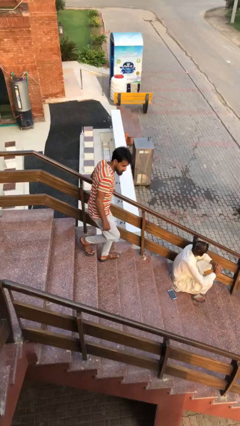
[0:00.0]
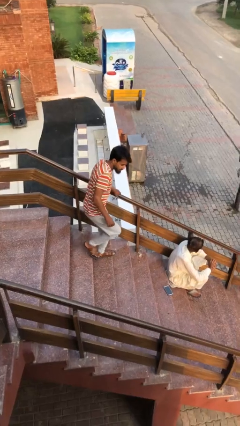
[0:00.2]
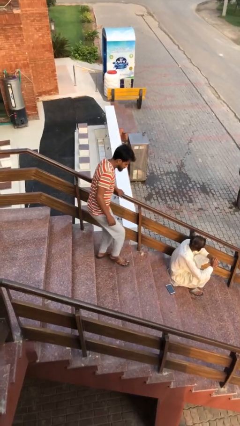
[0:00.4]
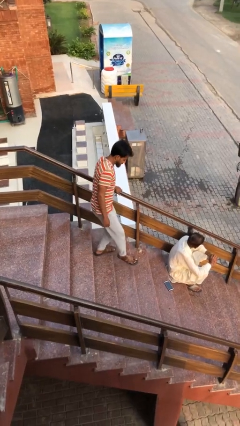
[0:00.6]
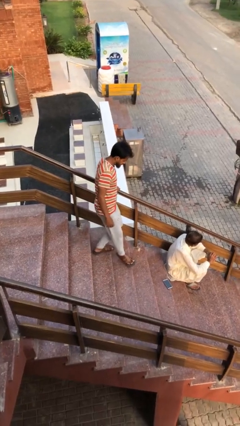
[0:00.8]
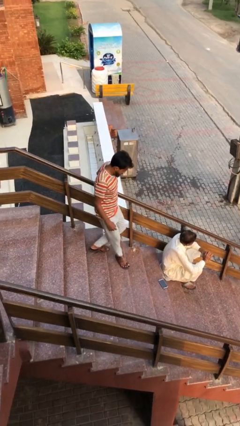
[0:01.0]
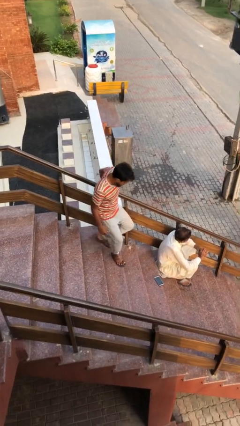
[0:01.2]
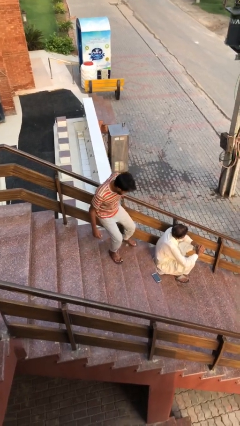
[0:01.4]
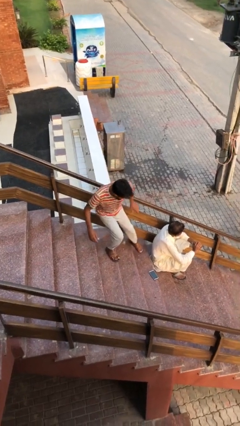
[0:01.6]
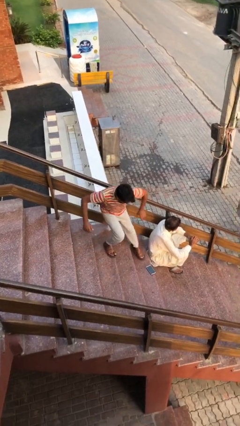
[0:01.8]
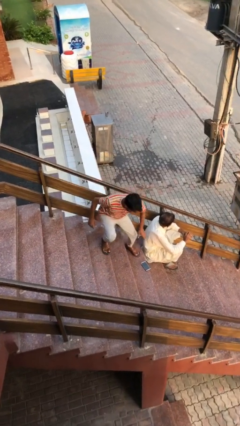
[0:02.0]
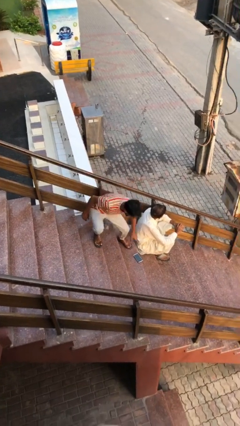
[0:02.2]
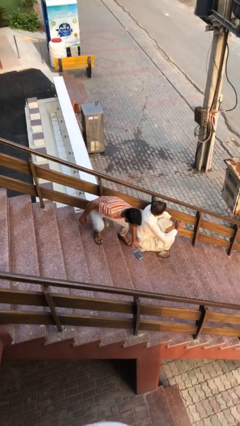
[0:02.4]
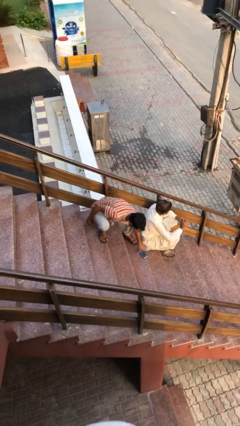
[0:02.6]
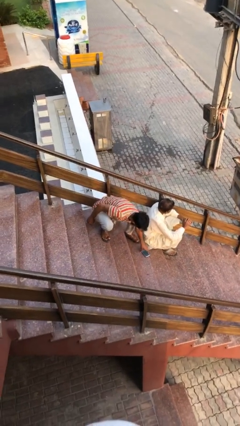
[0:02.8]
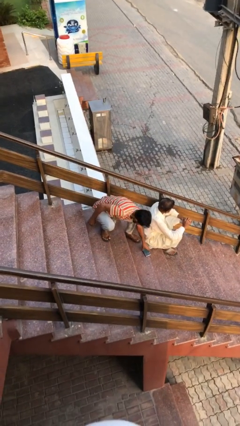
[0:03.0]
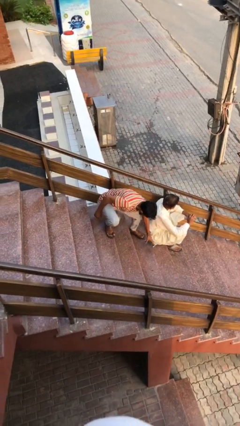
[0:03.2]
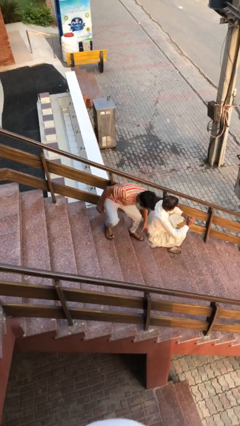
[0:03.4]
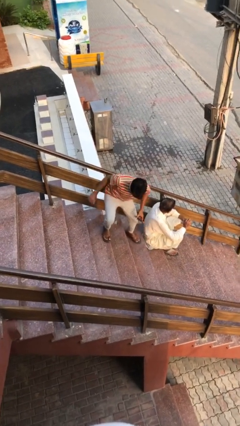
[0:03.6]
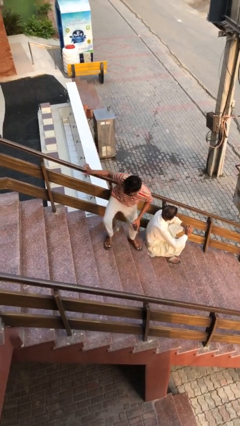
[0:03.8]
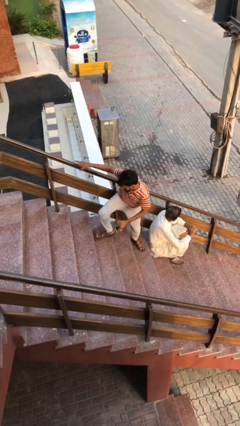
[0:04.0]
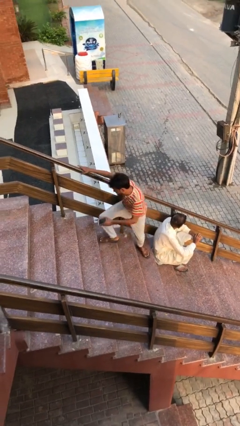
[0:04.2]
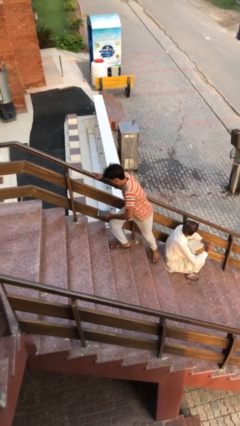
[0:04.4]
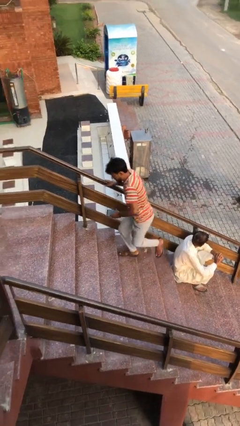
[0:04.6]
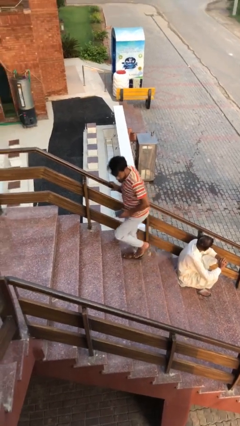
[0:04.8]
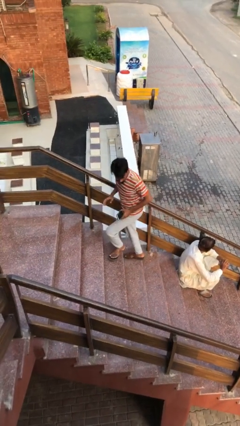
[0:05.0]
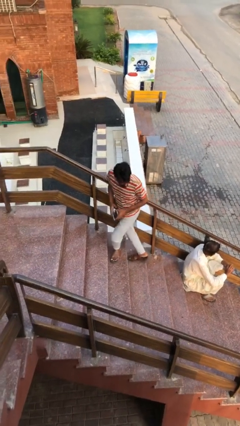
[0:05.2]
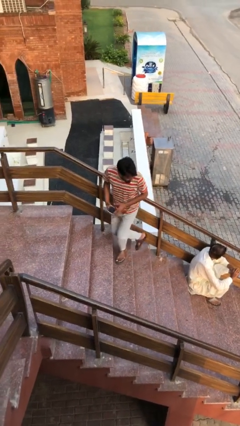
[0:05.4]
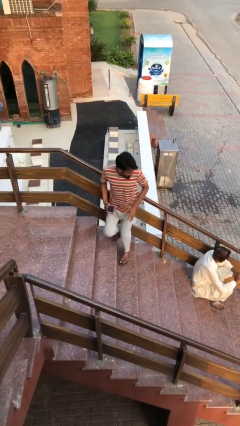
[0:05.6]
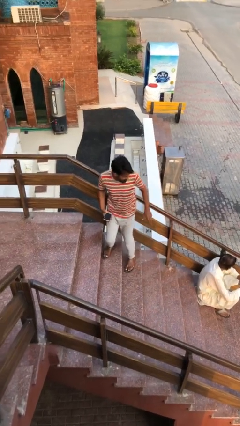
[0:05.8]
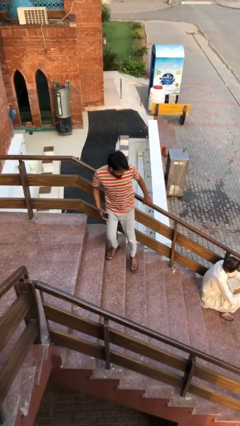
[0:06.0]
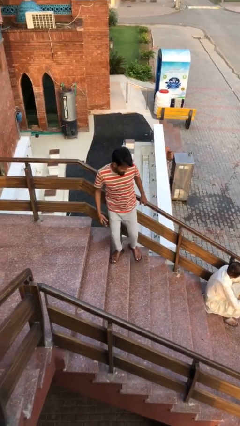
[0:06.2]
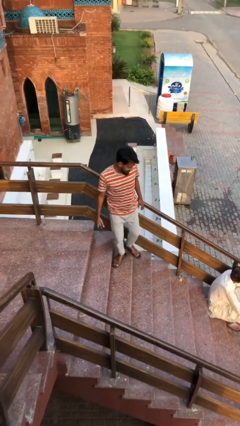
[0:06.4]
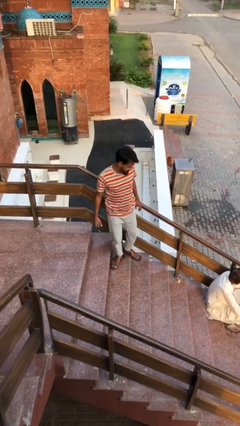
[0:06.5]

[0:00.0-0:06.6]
person steals object from person

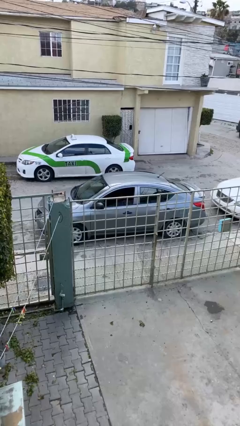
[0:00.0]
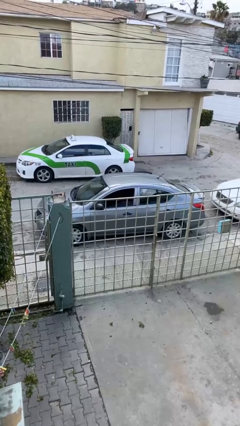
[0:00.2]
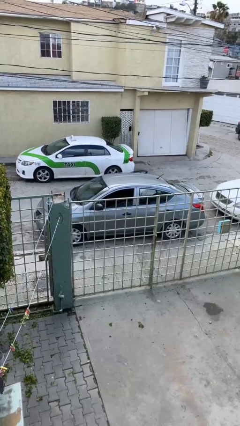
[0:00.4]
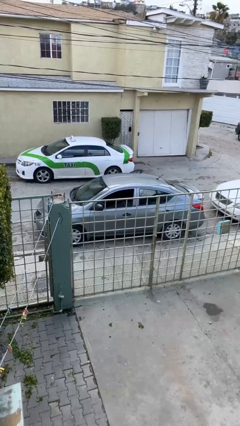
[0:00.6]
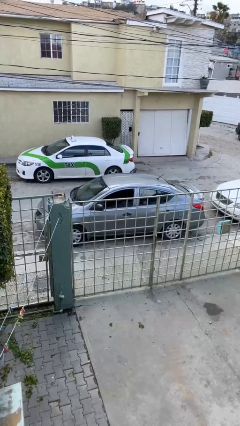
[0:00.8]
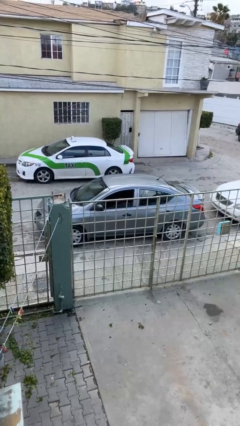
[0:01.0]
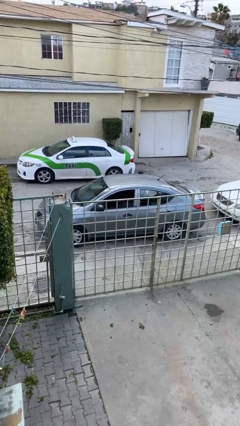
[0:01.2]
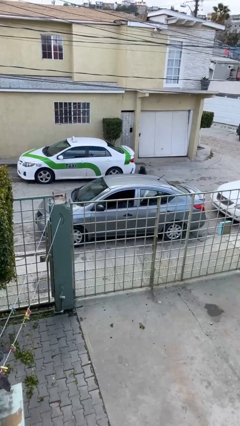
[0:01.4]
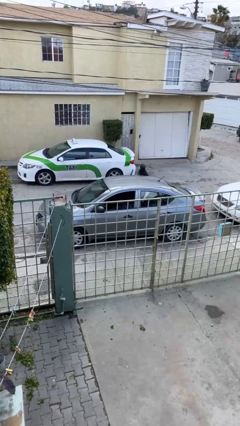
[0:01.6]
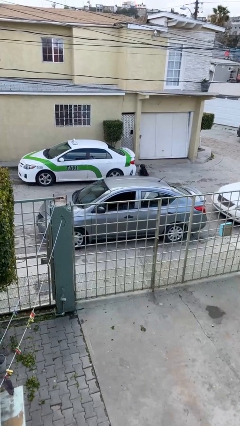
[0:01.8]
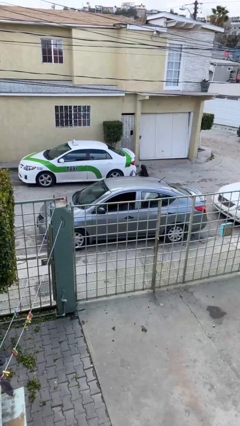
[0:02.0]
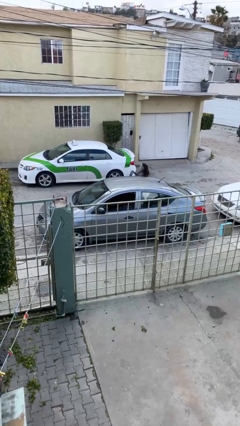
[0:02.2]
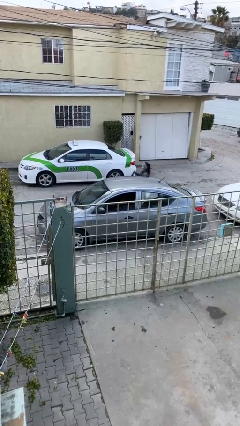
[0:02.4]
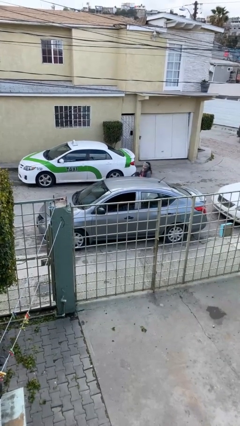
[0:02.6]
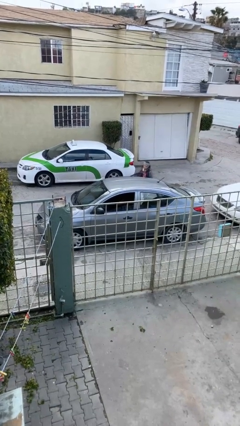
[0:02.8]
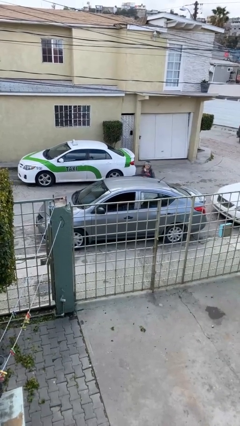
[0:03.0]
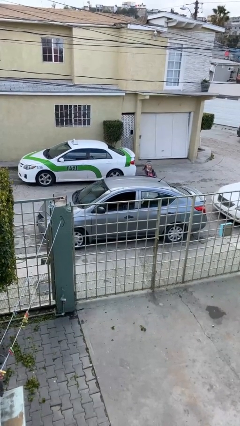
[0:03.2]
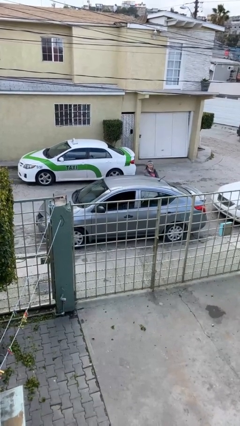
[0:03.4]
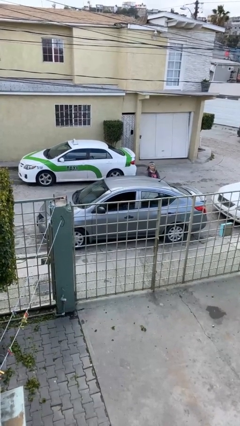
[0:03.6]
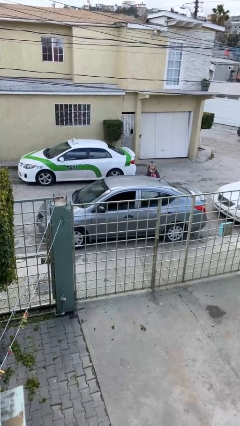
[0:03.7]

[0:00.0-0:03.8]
car drops off person

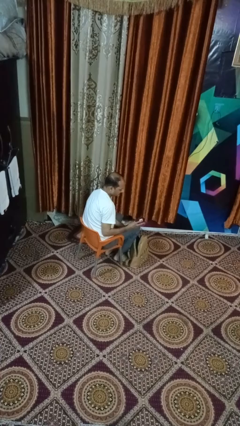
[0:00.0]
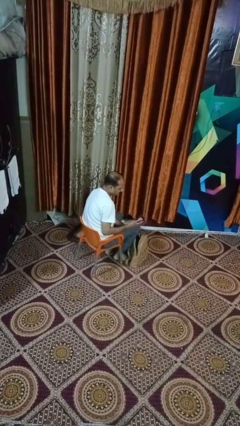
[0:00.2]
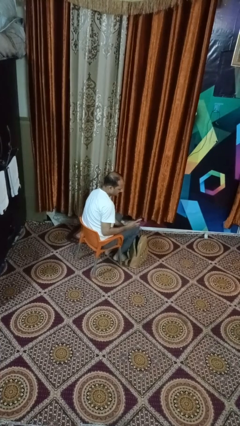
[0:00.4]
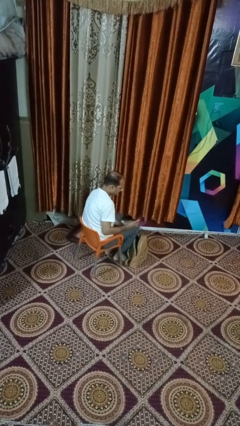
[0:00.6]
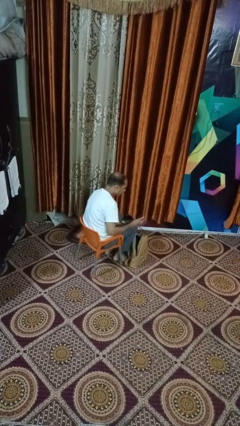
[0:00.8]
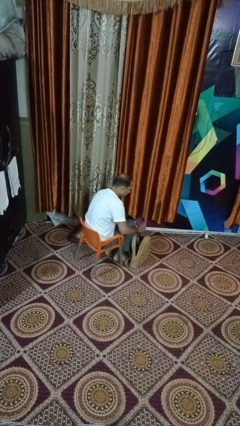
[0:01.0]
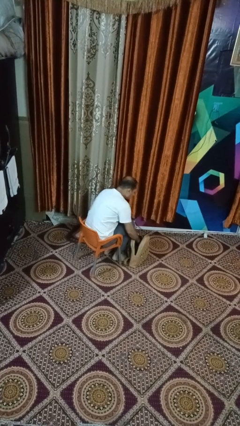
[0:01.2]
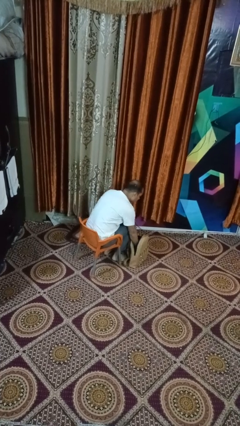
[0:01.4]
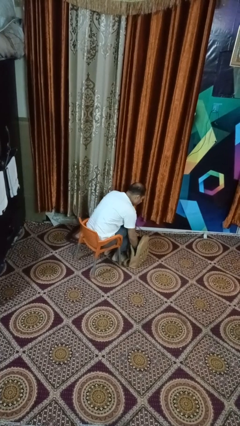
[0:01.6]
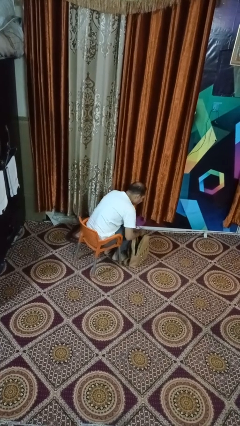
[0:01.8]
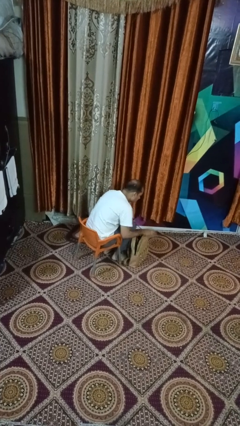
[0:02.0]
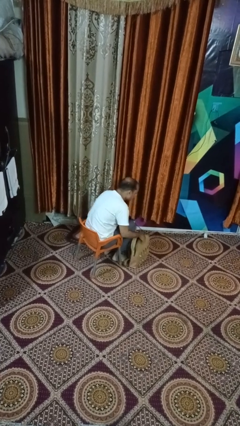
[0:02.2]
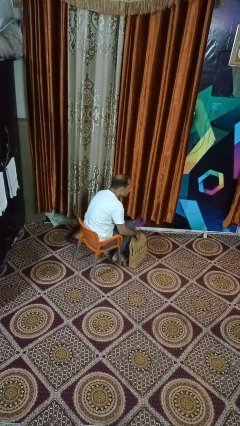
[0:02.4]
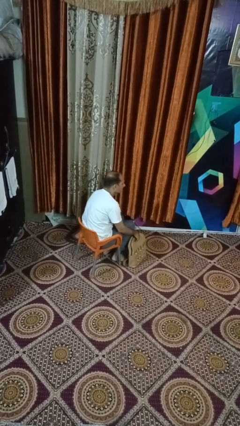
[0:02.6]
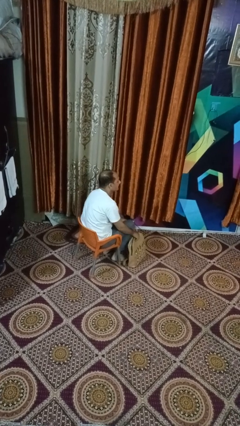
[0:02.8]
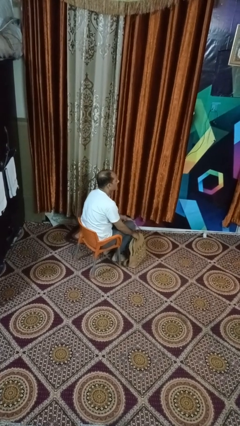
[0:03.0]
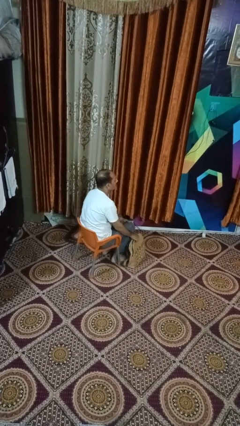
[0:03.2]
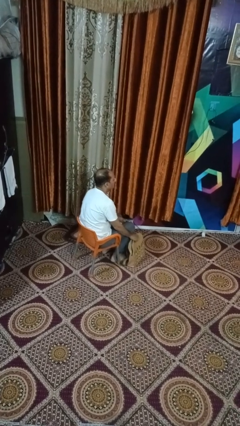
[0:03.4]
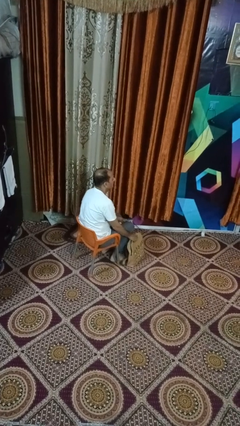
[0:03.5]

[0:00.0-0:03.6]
person puts object into purse

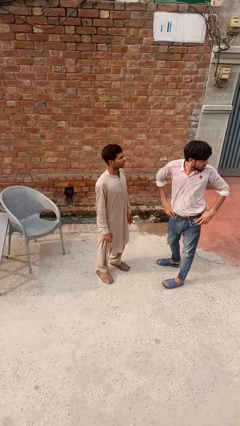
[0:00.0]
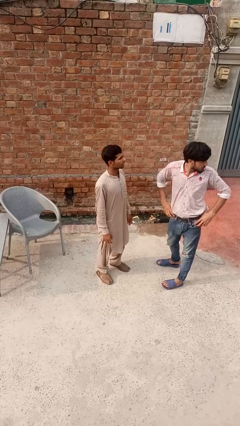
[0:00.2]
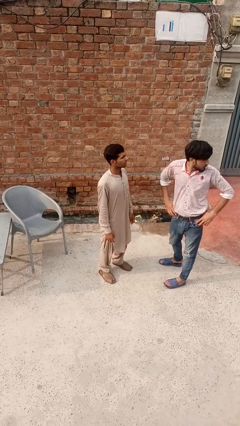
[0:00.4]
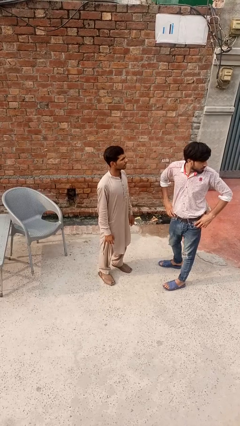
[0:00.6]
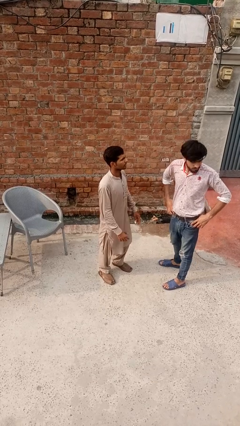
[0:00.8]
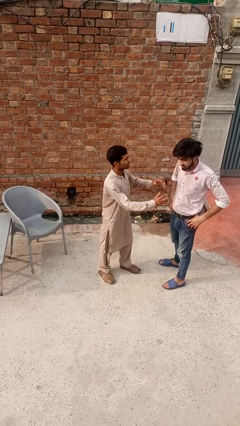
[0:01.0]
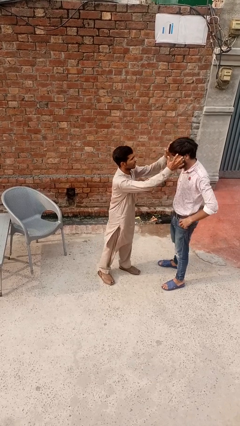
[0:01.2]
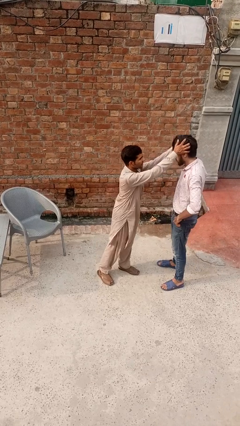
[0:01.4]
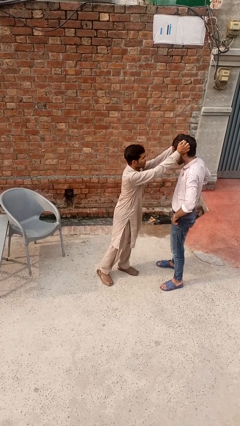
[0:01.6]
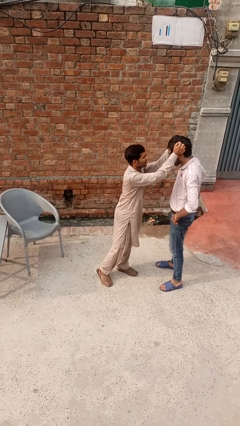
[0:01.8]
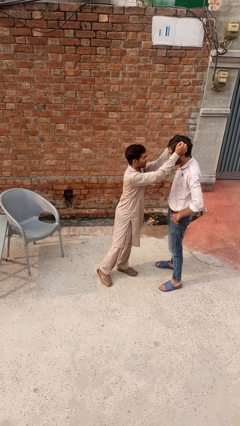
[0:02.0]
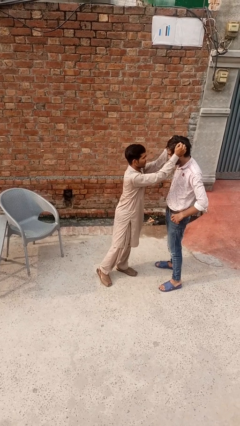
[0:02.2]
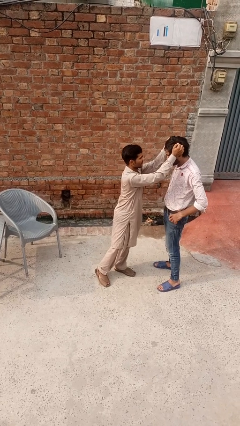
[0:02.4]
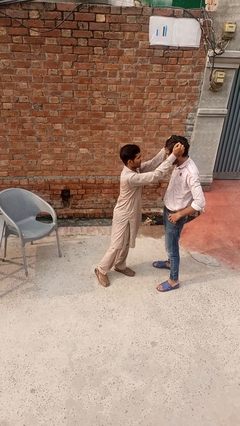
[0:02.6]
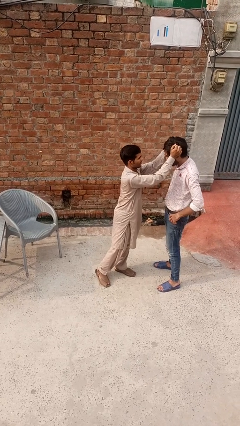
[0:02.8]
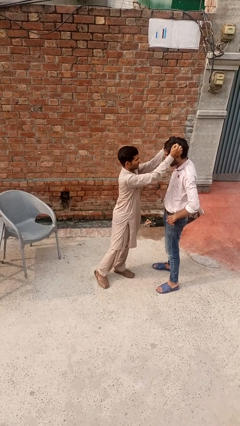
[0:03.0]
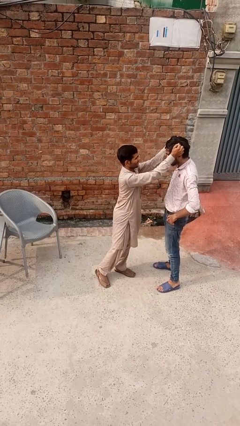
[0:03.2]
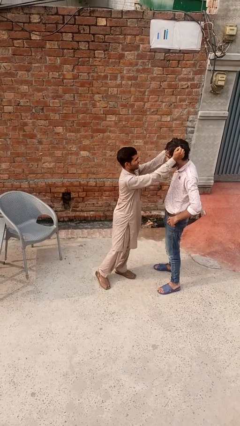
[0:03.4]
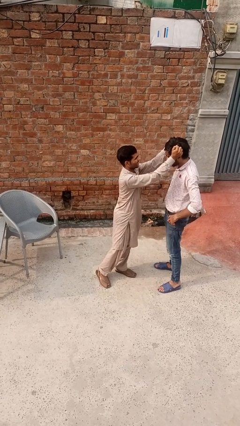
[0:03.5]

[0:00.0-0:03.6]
person grabs person by hair

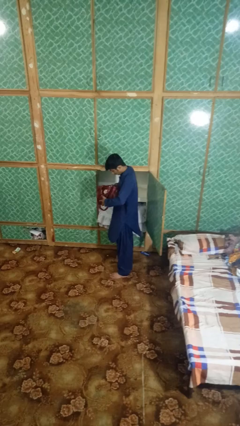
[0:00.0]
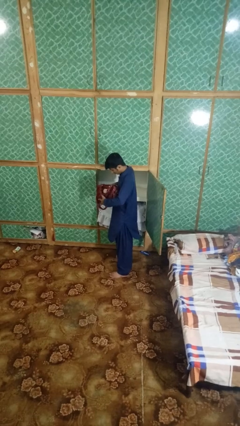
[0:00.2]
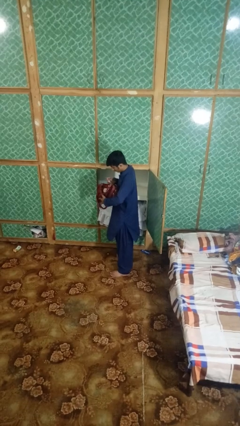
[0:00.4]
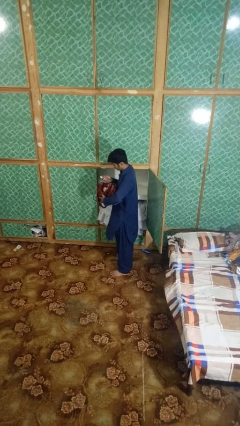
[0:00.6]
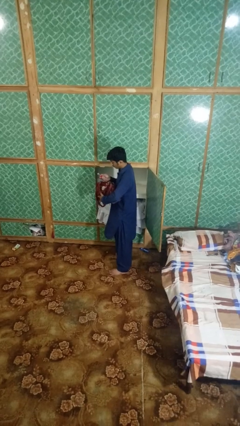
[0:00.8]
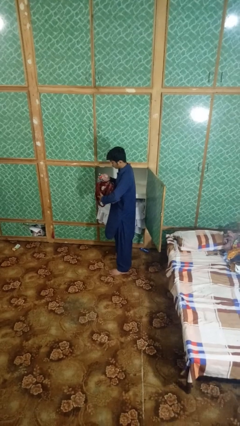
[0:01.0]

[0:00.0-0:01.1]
person takes object from purse
